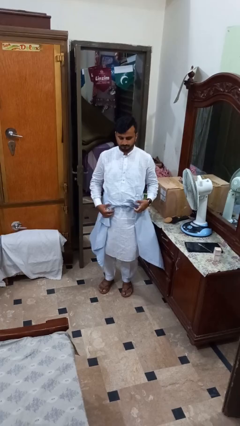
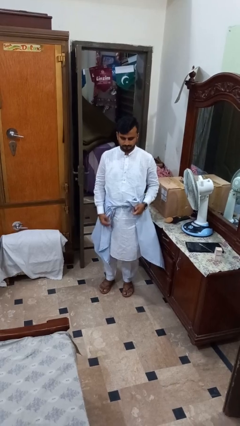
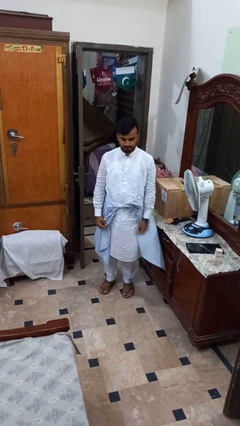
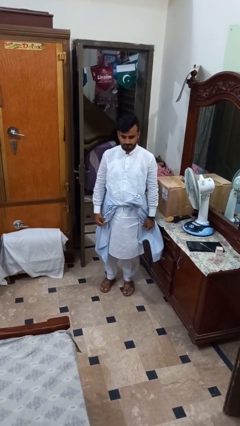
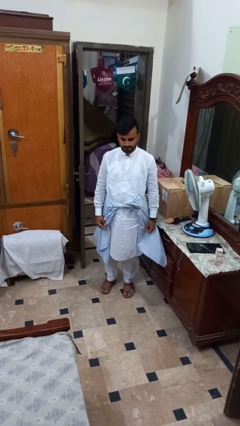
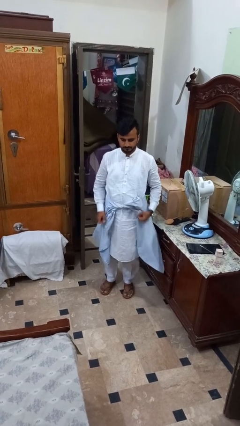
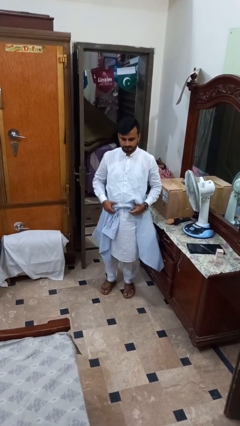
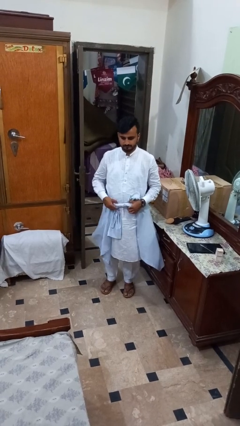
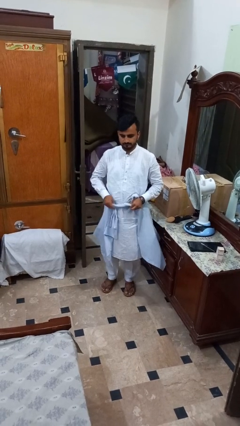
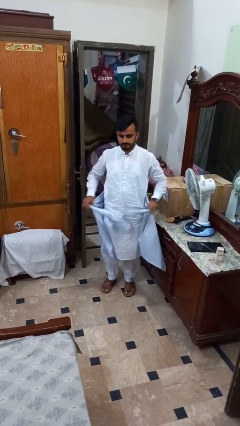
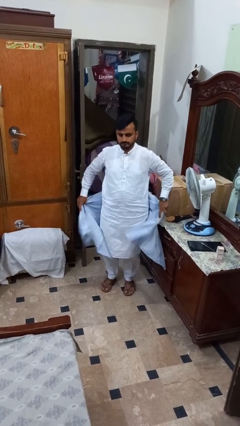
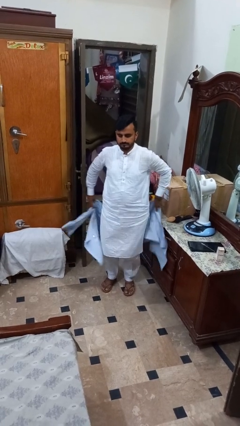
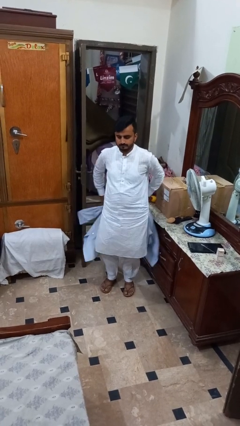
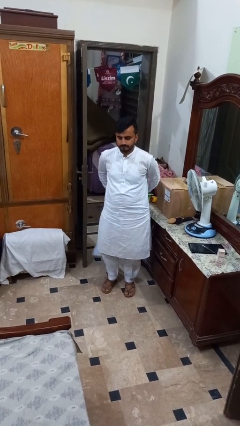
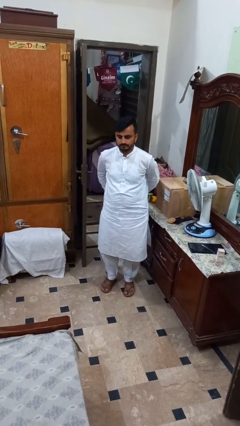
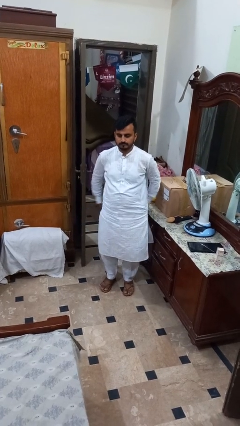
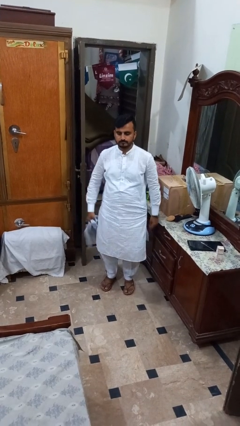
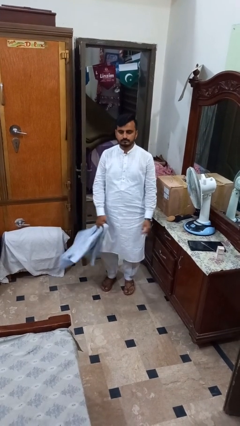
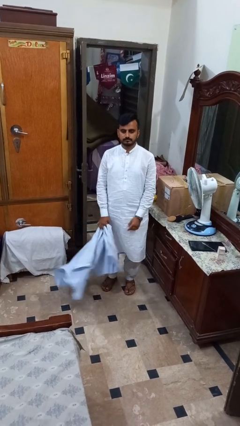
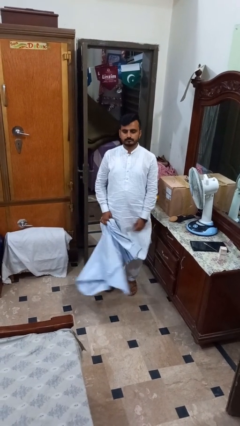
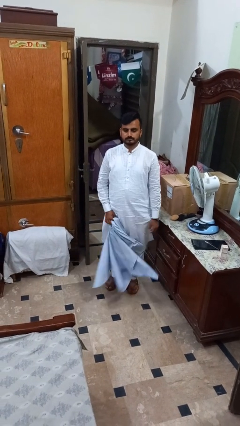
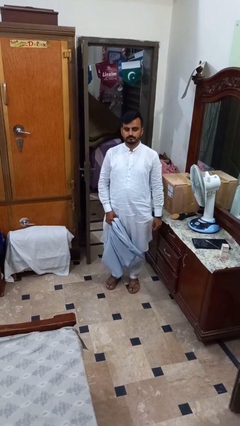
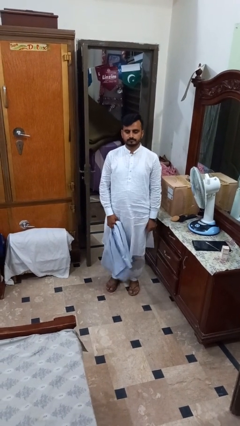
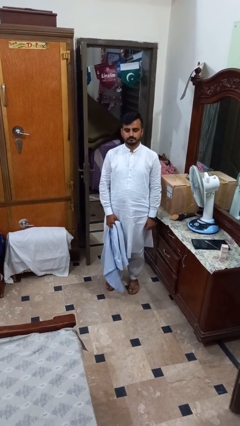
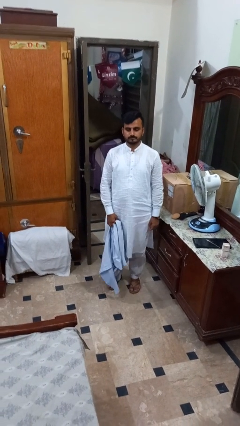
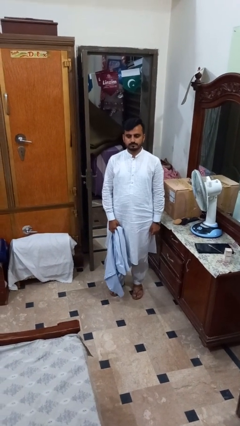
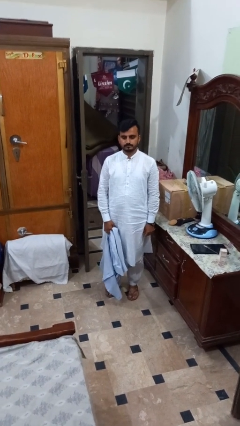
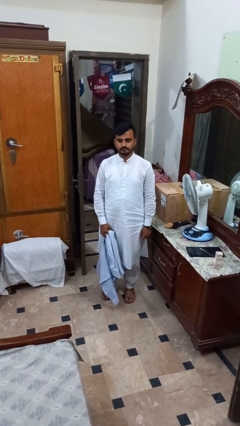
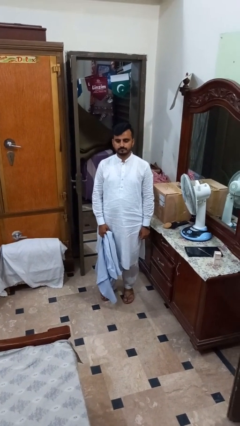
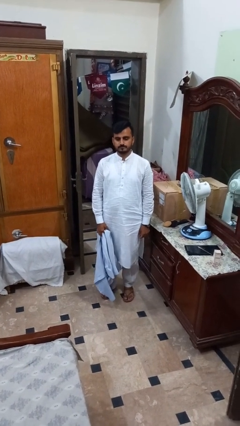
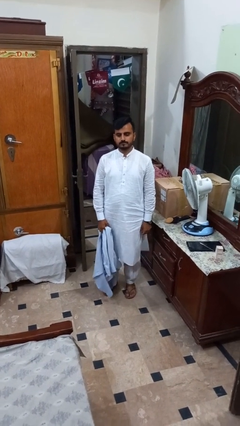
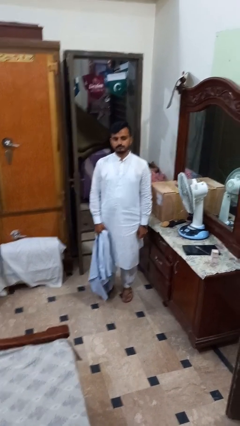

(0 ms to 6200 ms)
person unties jacket around waist

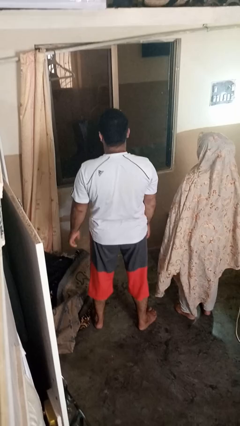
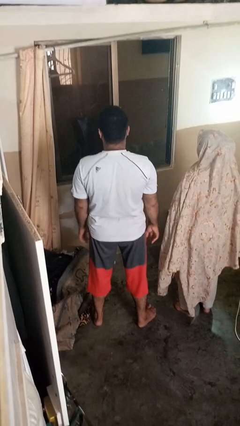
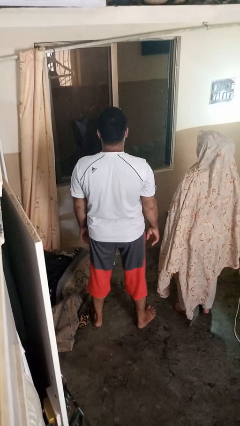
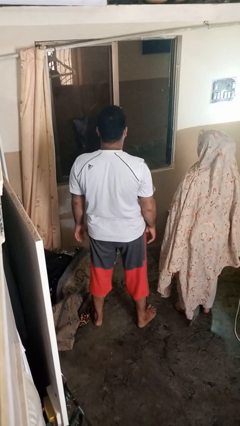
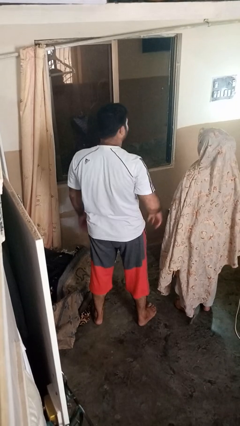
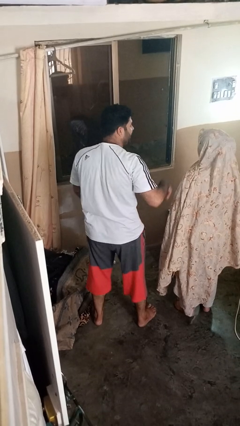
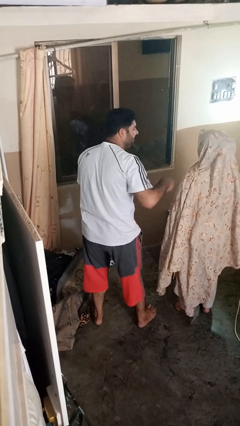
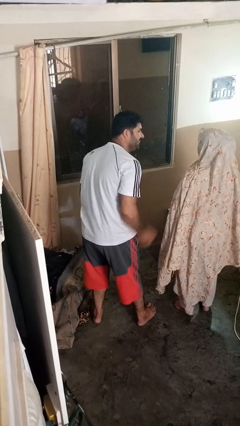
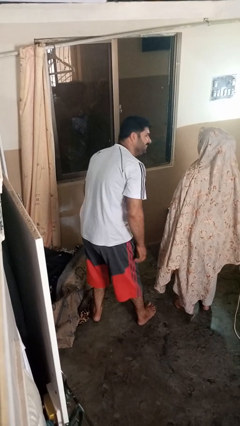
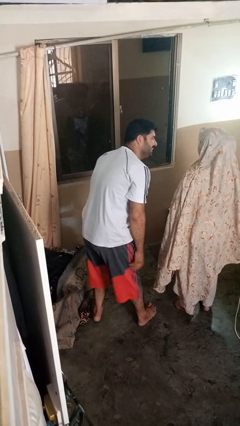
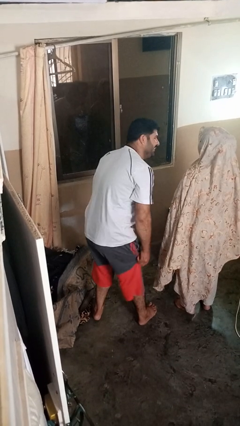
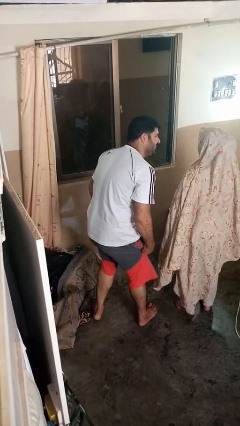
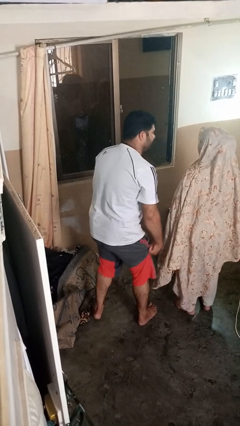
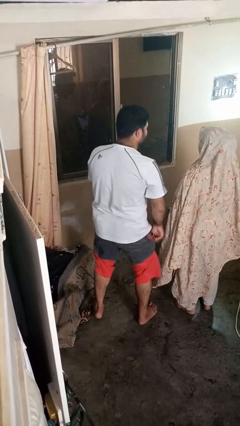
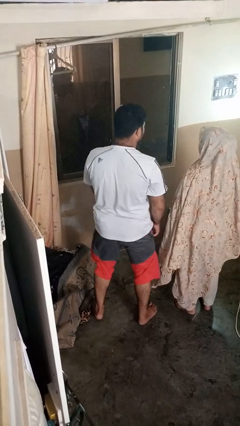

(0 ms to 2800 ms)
person laughs with person

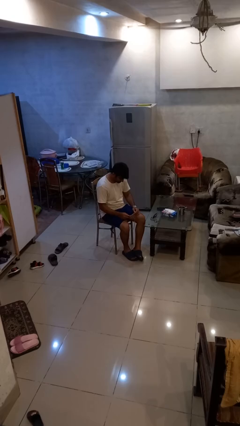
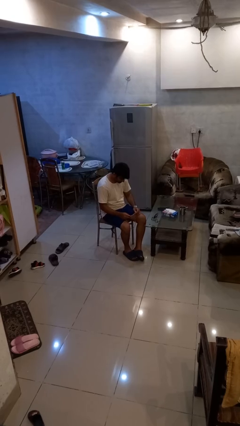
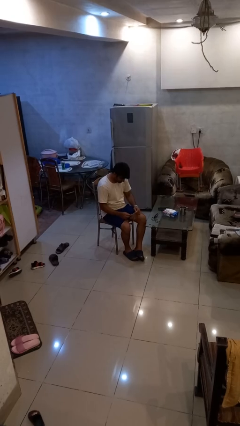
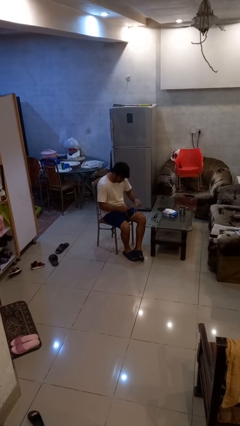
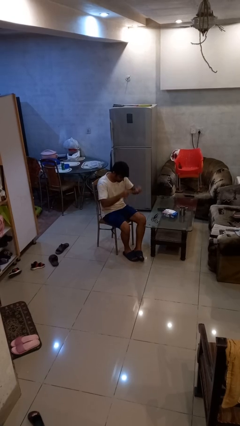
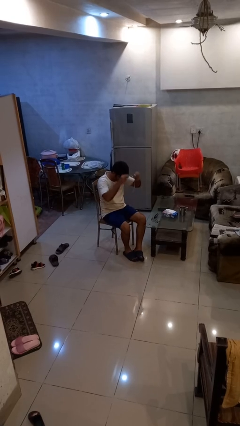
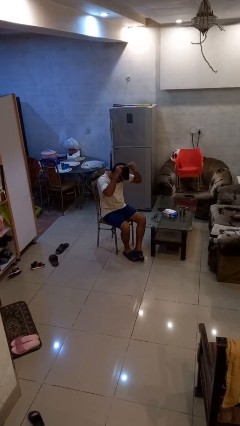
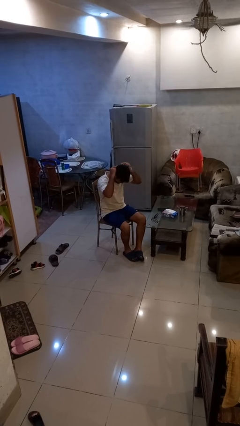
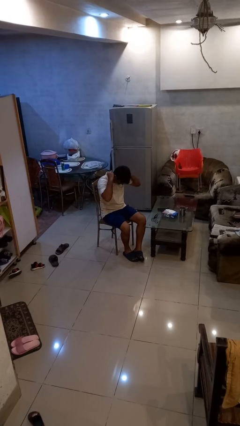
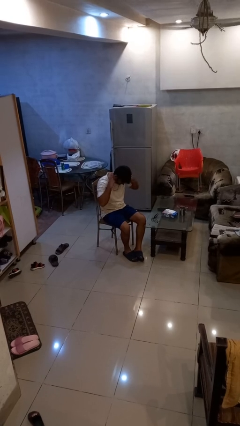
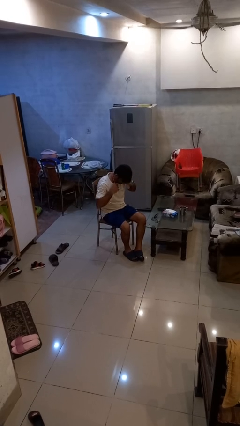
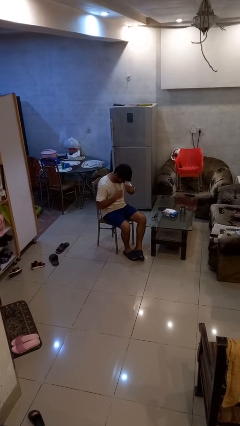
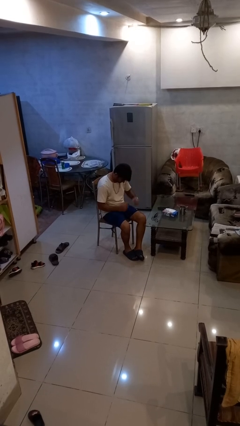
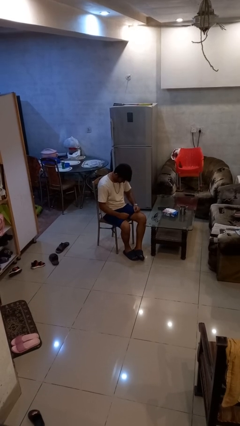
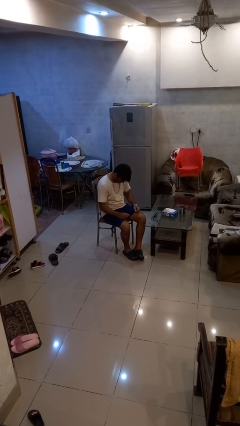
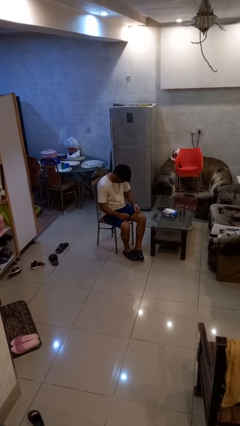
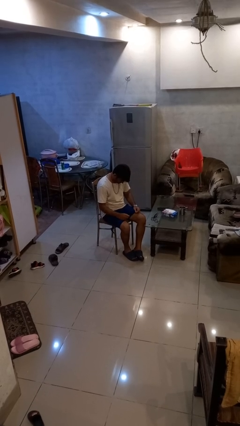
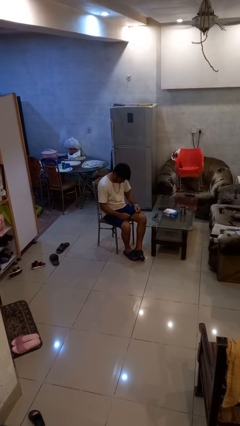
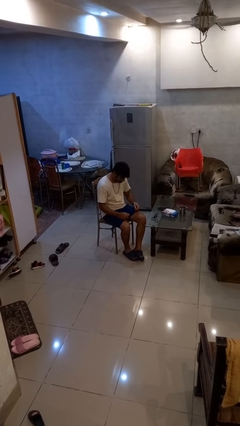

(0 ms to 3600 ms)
person puts on necklace

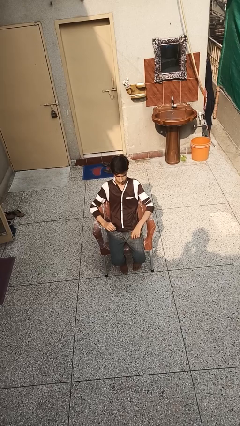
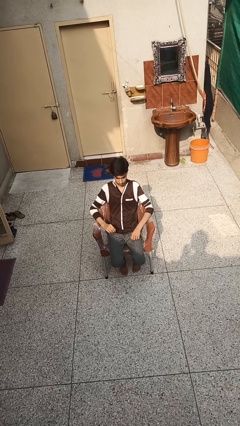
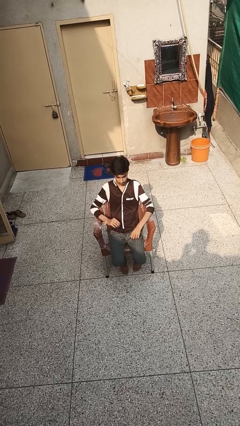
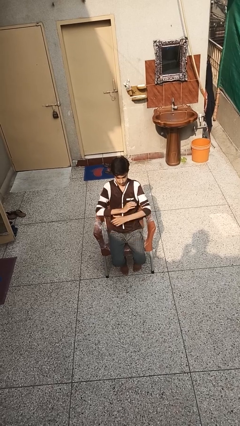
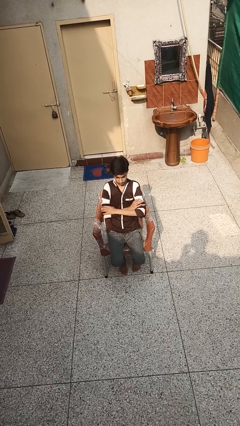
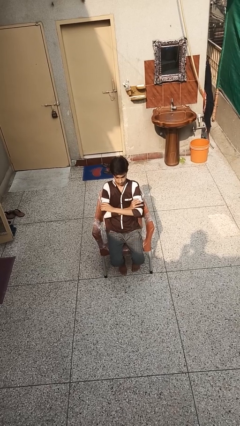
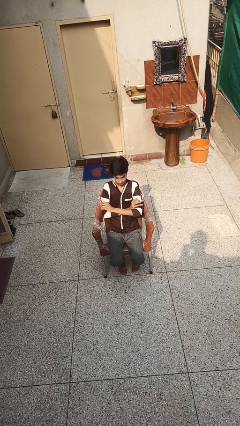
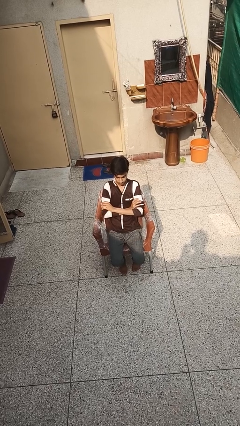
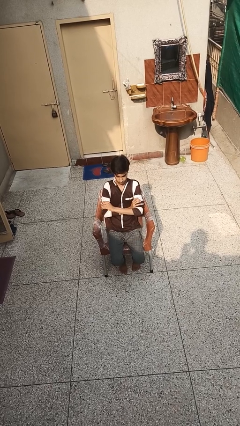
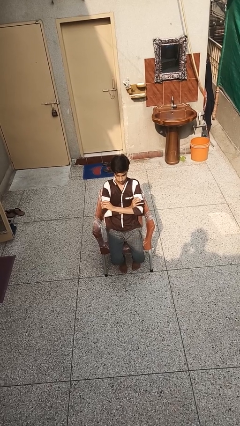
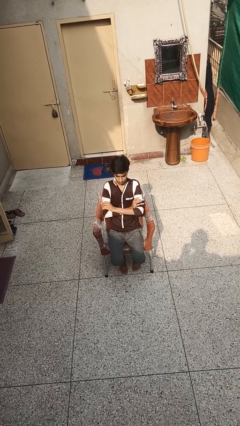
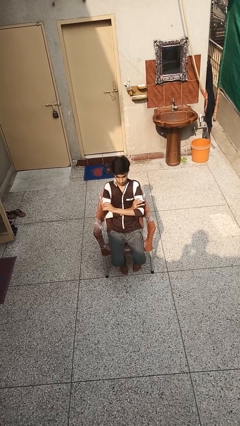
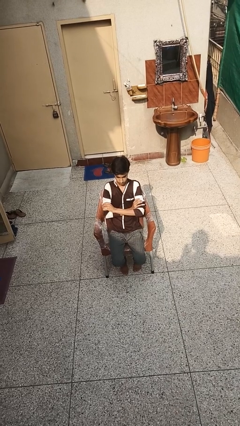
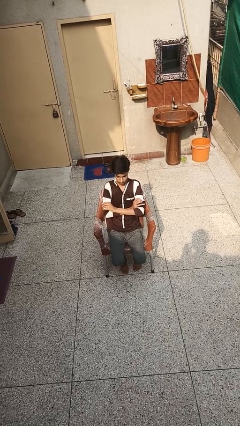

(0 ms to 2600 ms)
person crosses arms

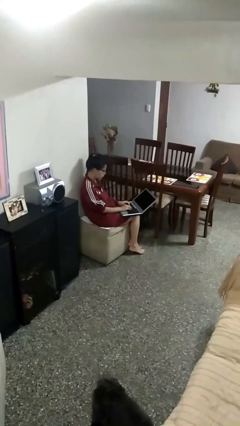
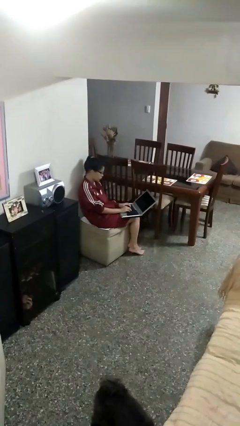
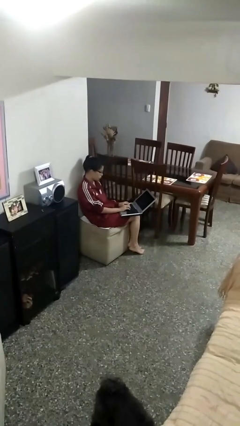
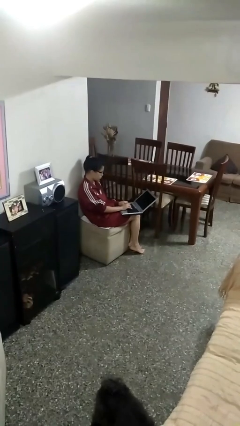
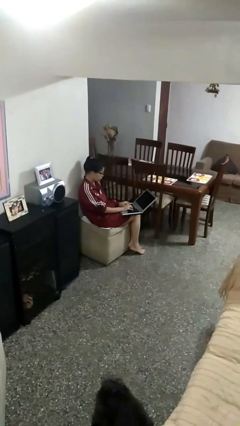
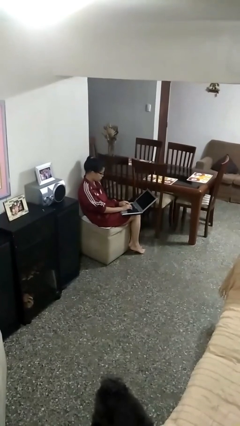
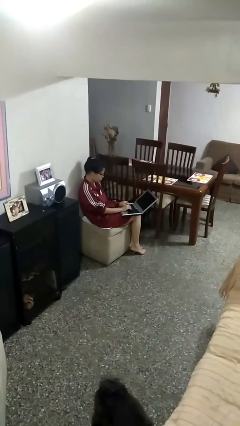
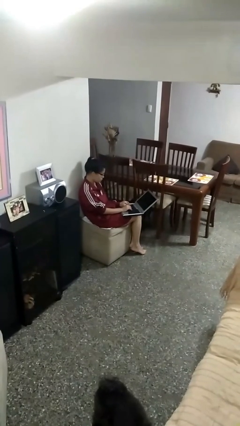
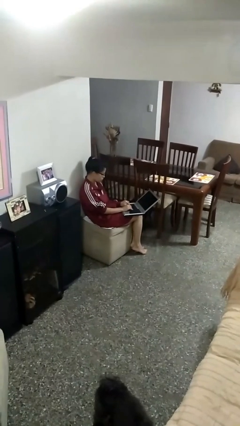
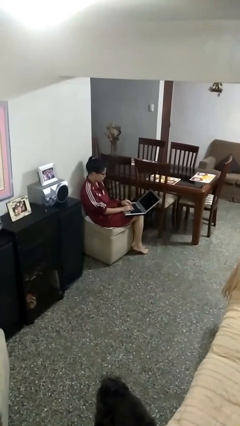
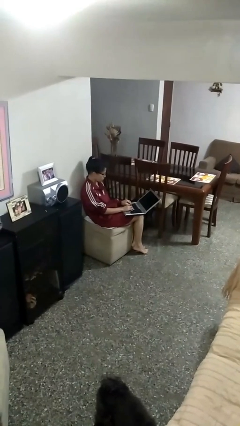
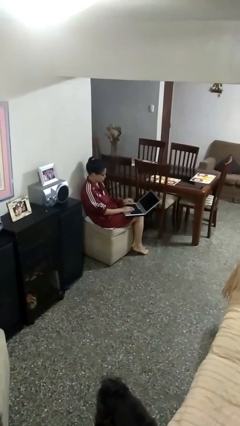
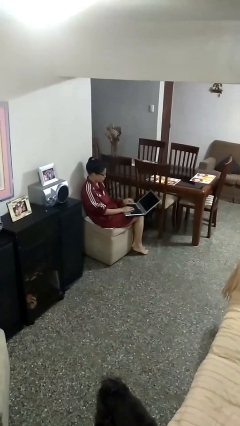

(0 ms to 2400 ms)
person interacts with laptop
